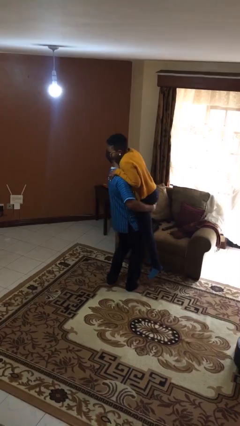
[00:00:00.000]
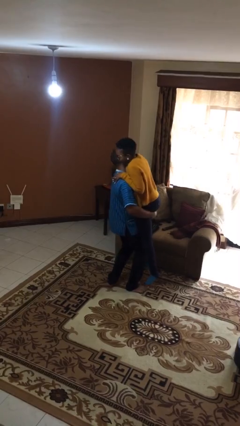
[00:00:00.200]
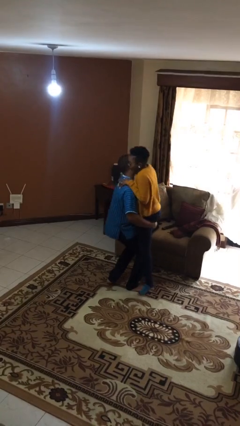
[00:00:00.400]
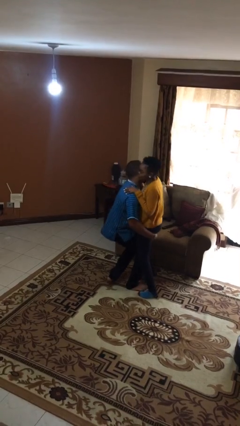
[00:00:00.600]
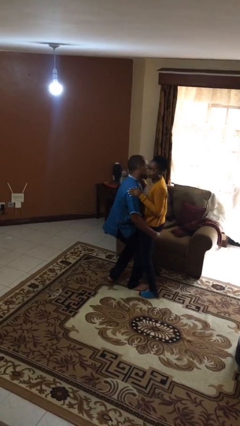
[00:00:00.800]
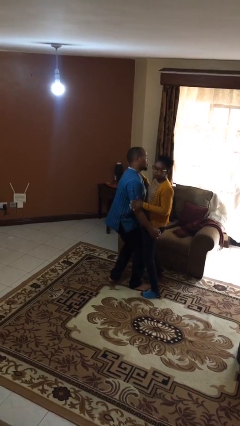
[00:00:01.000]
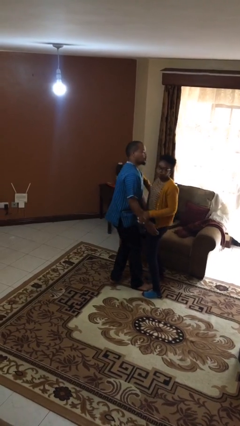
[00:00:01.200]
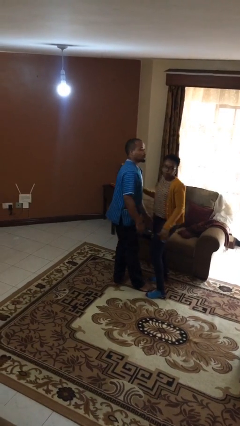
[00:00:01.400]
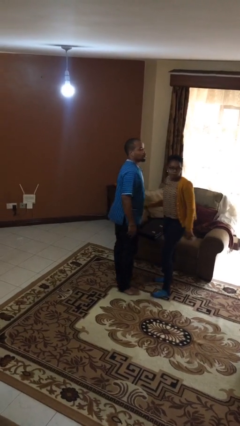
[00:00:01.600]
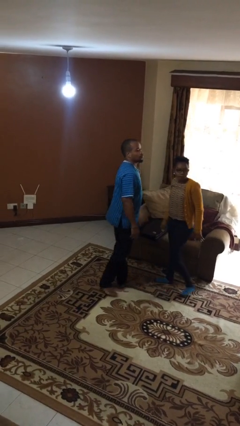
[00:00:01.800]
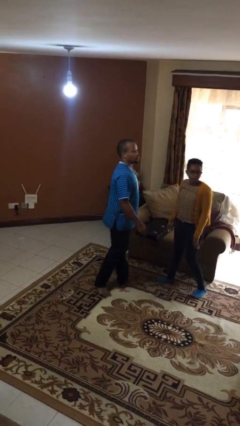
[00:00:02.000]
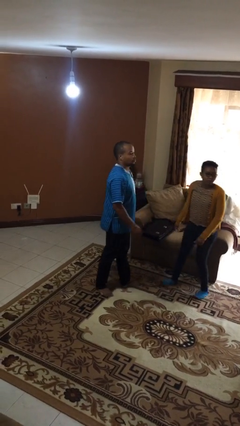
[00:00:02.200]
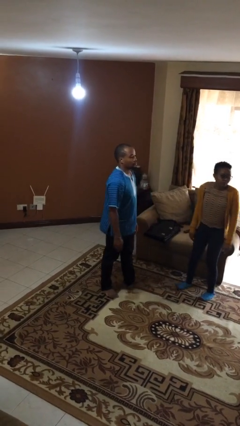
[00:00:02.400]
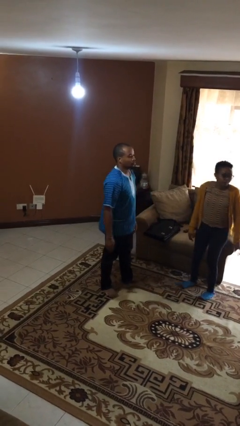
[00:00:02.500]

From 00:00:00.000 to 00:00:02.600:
person puts down person

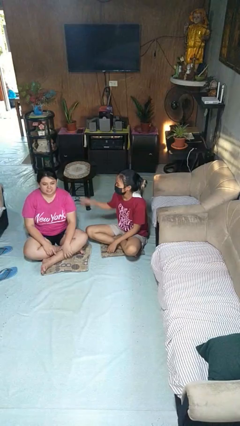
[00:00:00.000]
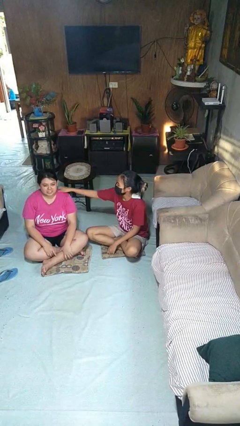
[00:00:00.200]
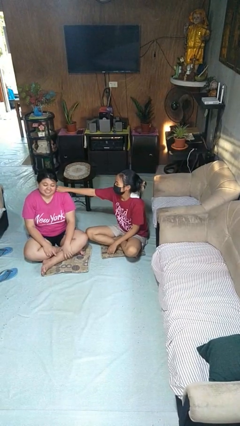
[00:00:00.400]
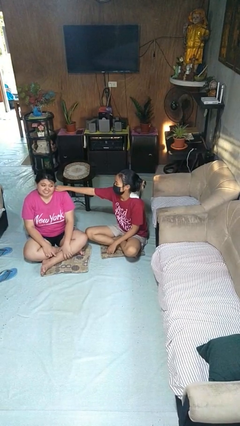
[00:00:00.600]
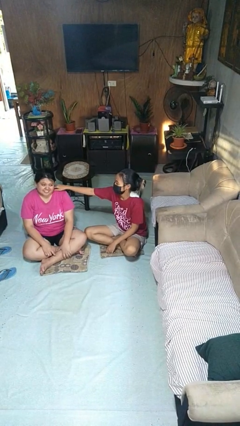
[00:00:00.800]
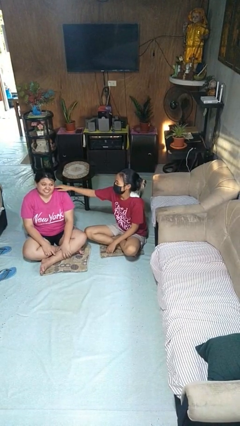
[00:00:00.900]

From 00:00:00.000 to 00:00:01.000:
person tickles person

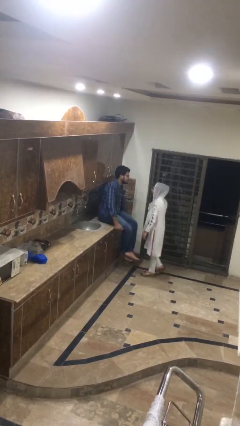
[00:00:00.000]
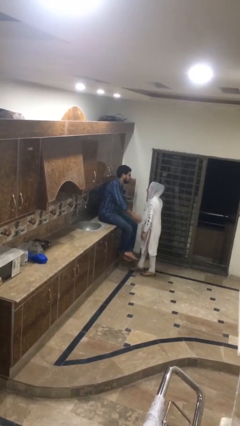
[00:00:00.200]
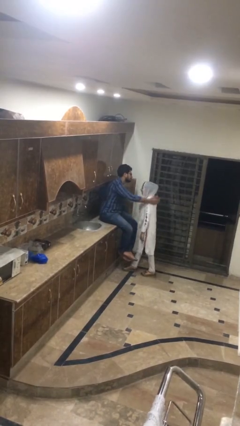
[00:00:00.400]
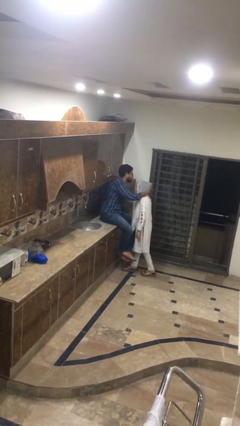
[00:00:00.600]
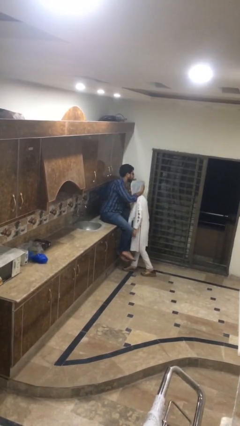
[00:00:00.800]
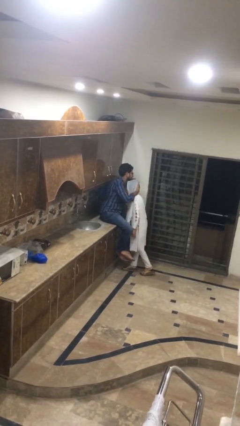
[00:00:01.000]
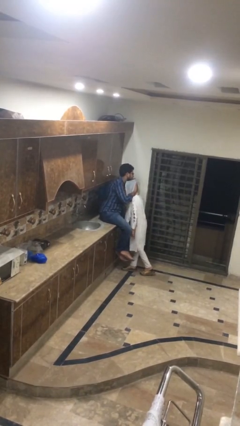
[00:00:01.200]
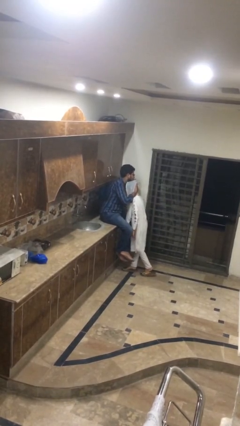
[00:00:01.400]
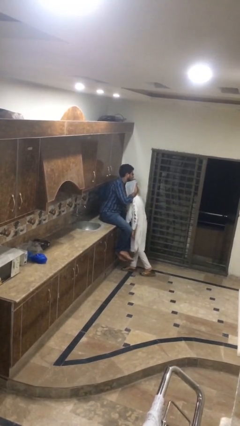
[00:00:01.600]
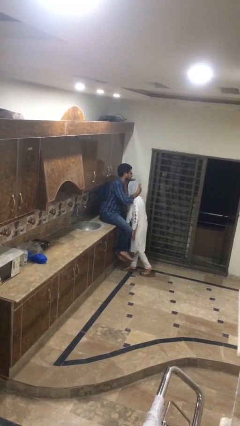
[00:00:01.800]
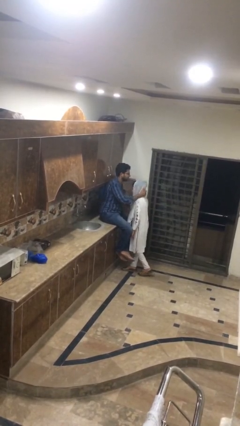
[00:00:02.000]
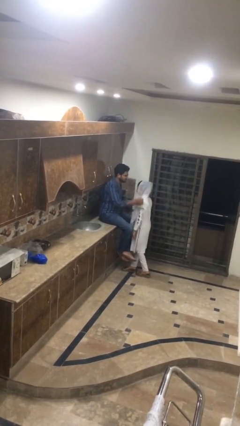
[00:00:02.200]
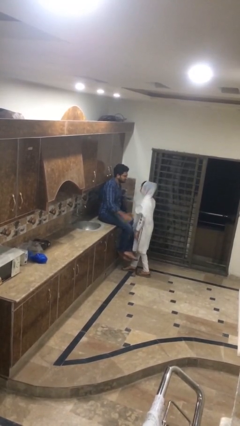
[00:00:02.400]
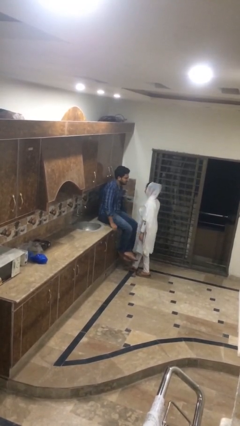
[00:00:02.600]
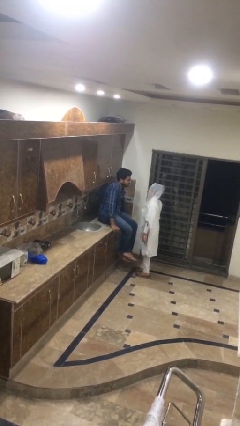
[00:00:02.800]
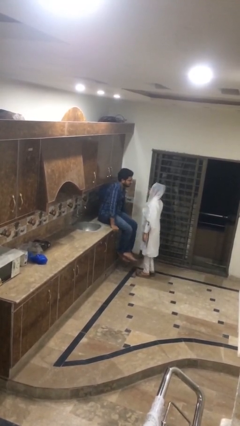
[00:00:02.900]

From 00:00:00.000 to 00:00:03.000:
person embraces person

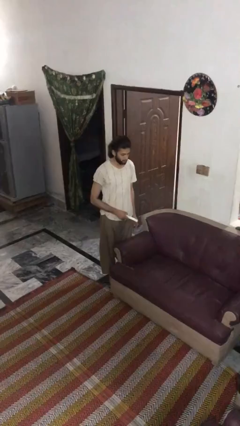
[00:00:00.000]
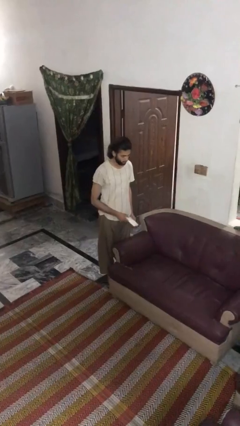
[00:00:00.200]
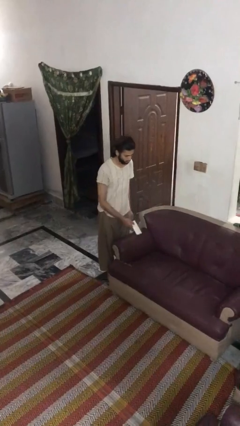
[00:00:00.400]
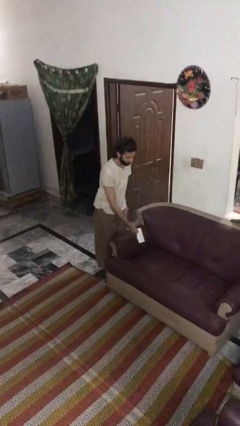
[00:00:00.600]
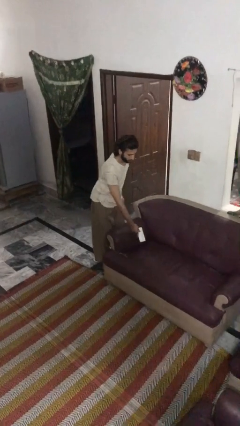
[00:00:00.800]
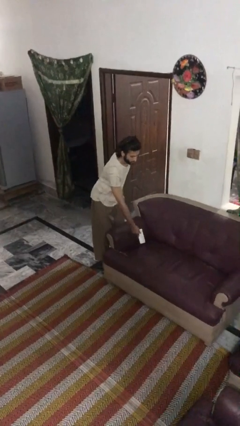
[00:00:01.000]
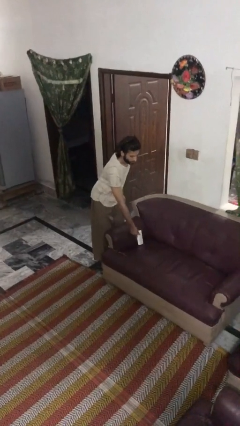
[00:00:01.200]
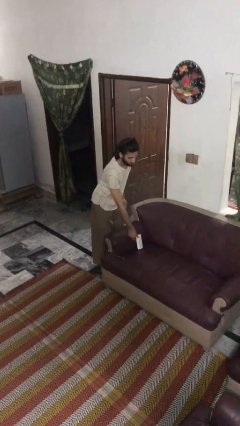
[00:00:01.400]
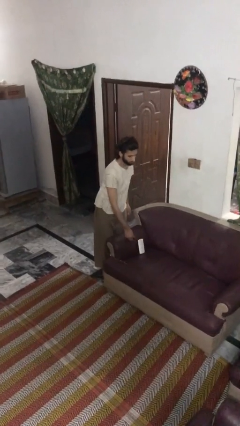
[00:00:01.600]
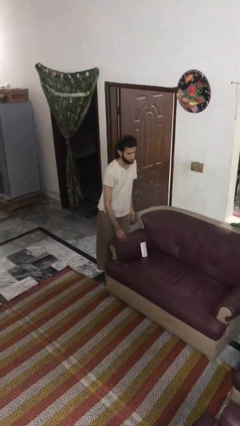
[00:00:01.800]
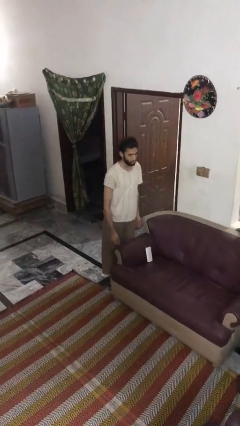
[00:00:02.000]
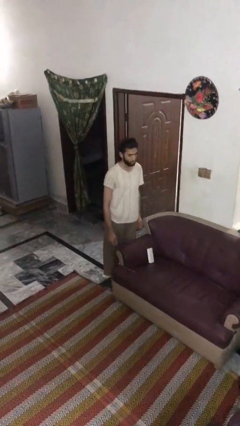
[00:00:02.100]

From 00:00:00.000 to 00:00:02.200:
person puts down object on couch

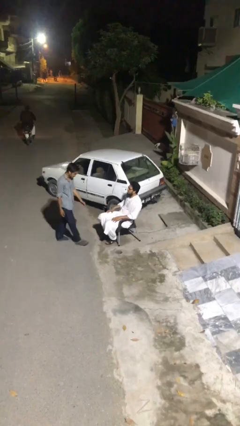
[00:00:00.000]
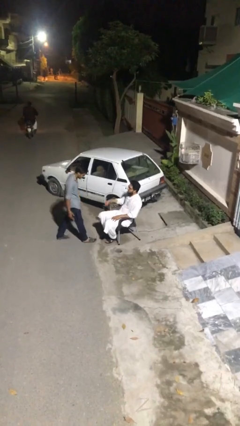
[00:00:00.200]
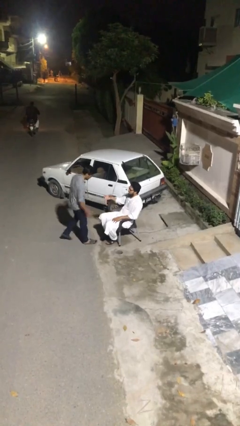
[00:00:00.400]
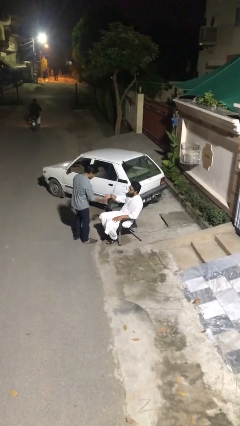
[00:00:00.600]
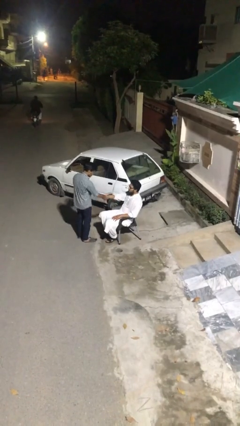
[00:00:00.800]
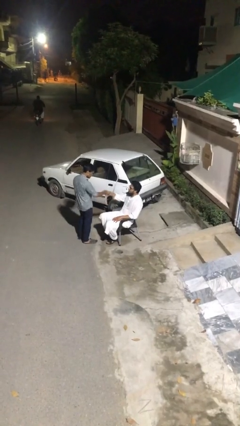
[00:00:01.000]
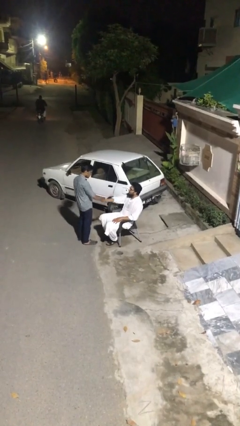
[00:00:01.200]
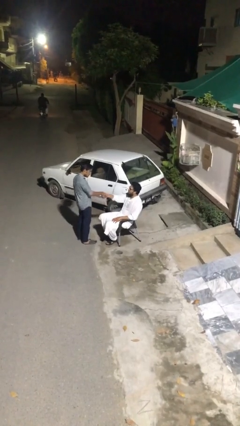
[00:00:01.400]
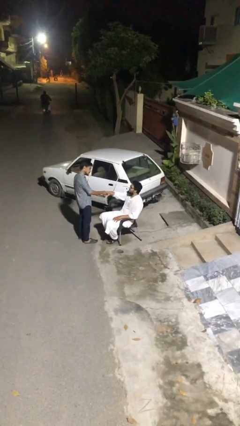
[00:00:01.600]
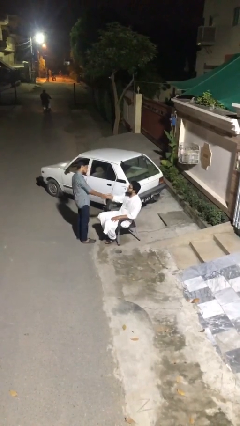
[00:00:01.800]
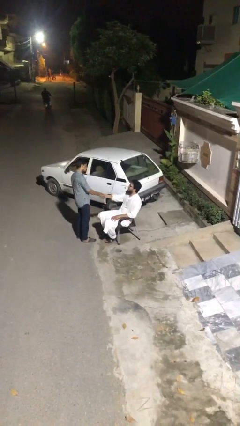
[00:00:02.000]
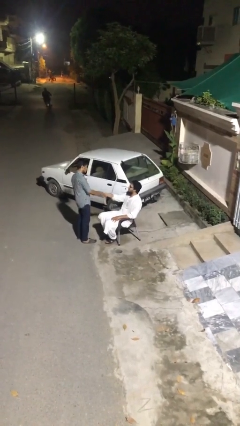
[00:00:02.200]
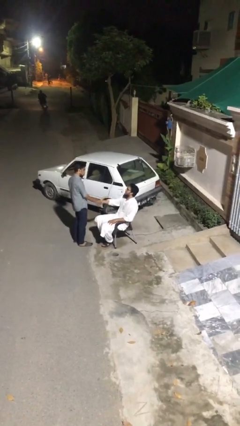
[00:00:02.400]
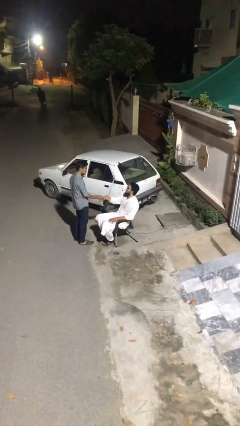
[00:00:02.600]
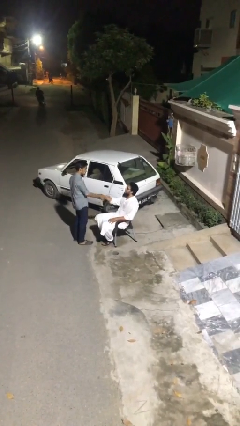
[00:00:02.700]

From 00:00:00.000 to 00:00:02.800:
person shakes hand

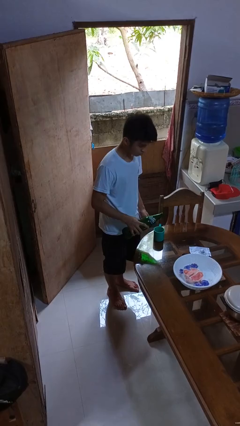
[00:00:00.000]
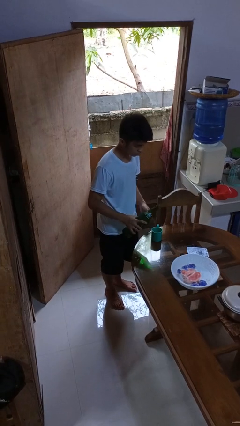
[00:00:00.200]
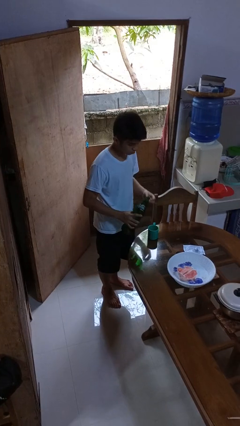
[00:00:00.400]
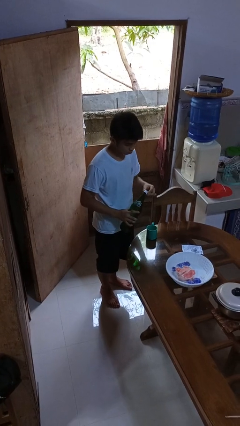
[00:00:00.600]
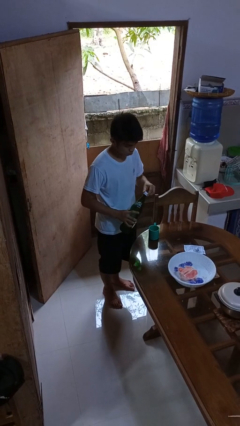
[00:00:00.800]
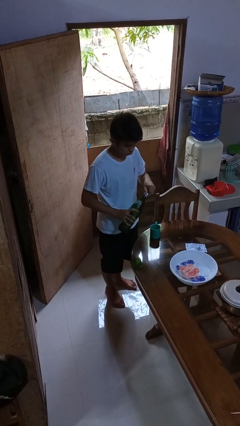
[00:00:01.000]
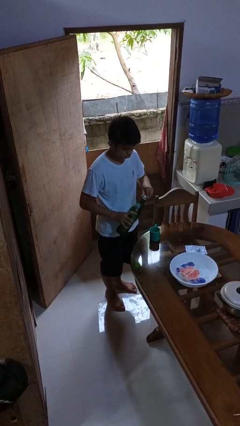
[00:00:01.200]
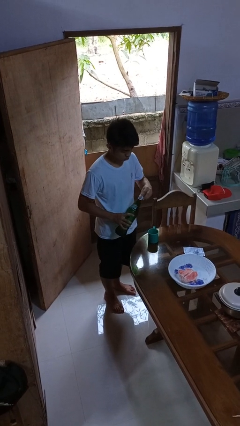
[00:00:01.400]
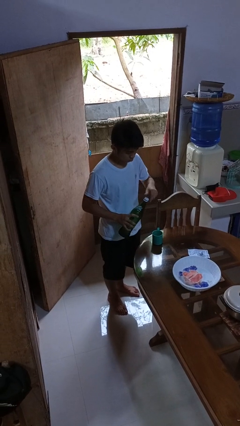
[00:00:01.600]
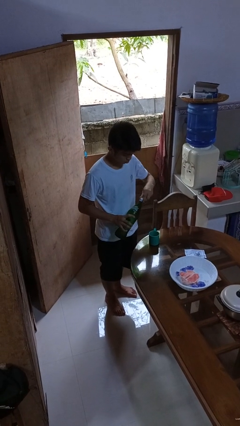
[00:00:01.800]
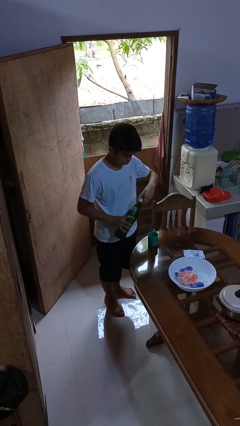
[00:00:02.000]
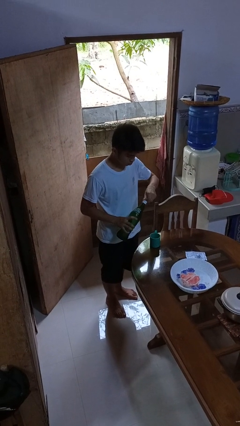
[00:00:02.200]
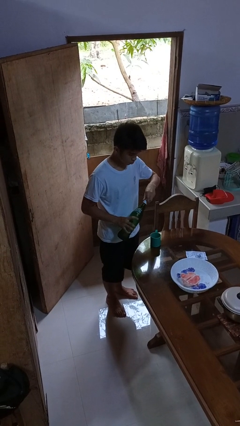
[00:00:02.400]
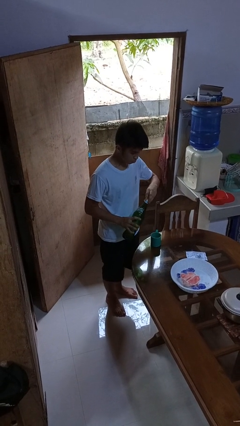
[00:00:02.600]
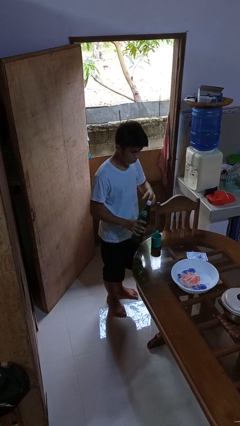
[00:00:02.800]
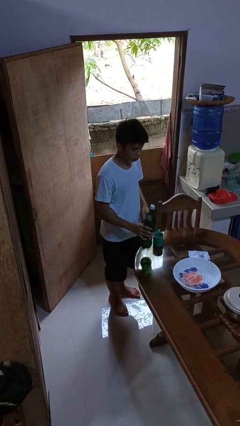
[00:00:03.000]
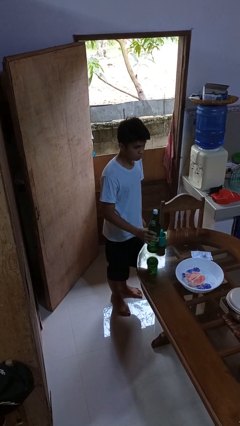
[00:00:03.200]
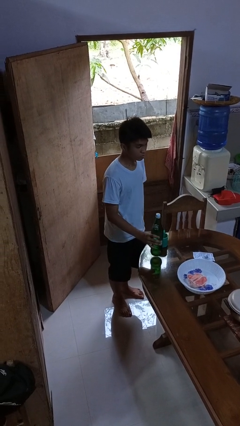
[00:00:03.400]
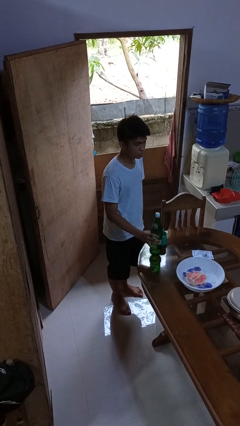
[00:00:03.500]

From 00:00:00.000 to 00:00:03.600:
person screws lid to bottle

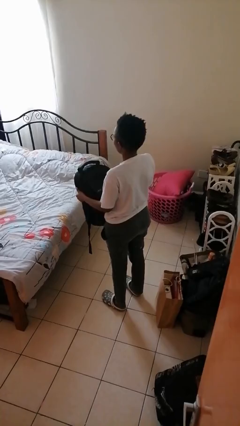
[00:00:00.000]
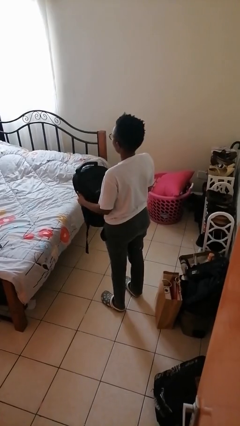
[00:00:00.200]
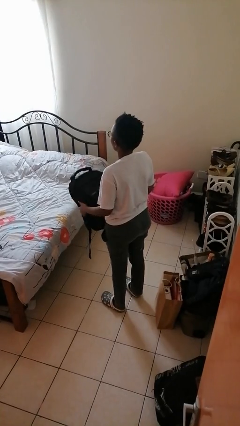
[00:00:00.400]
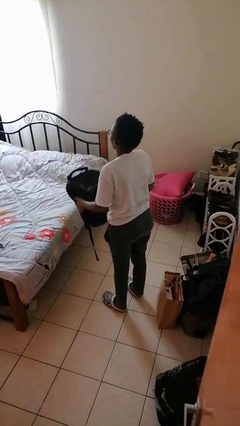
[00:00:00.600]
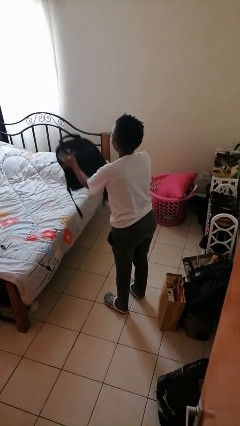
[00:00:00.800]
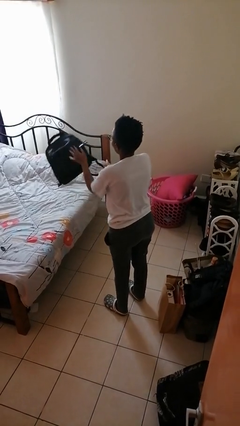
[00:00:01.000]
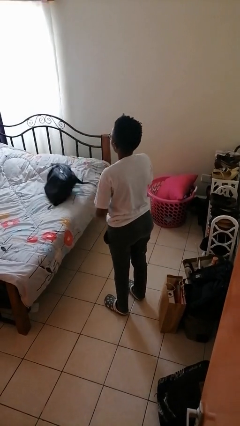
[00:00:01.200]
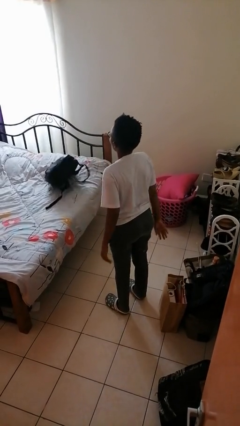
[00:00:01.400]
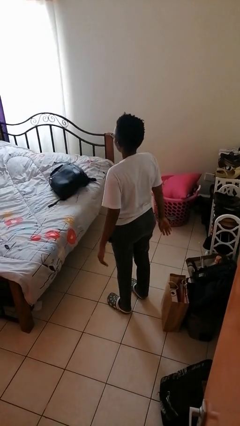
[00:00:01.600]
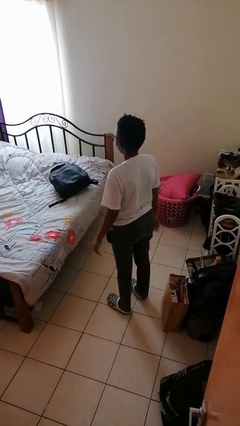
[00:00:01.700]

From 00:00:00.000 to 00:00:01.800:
person throws object on bed
